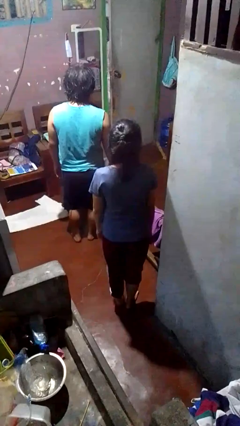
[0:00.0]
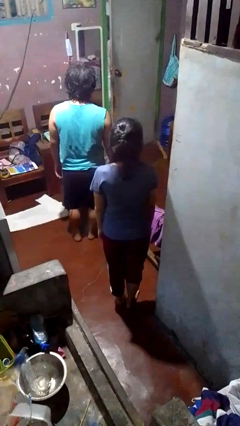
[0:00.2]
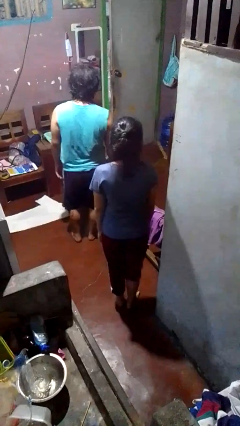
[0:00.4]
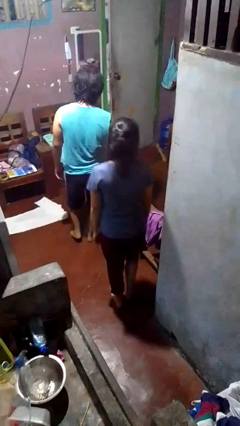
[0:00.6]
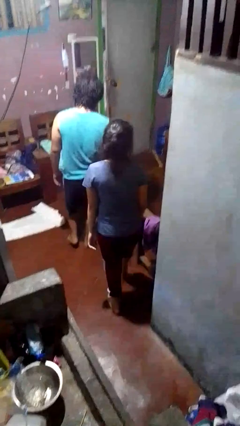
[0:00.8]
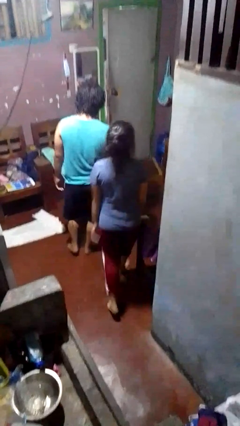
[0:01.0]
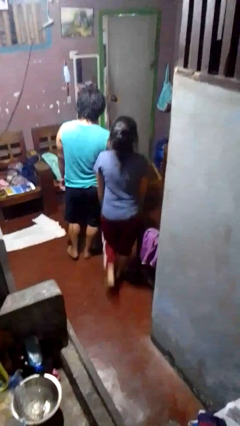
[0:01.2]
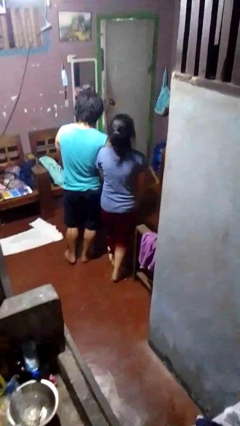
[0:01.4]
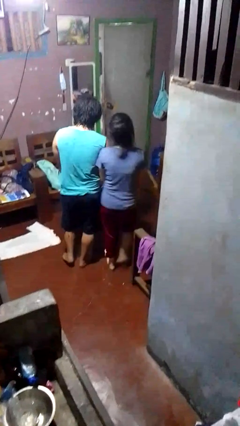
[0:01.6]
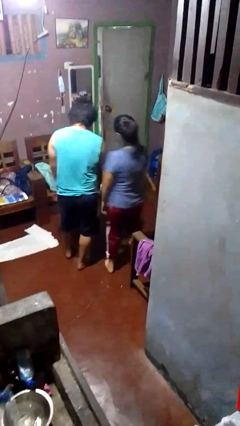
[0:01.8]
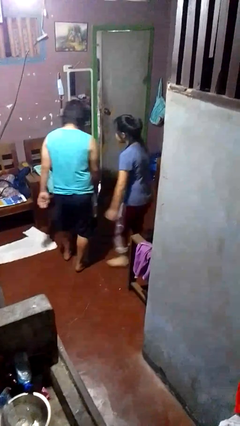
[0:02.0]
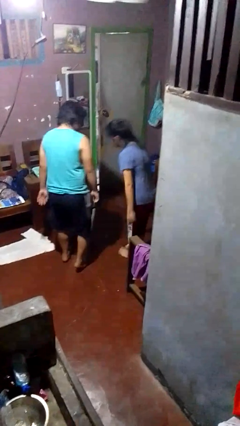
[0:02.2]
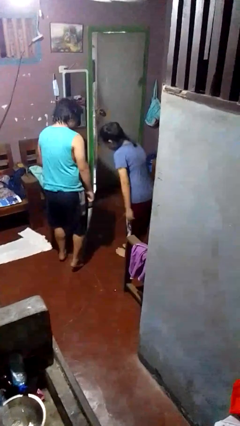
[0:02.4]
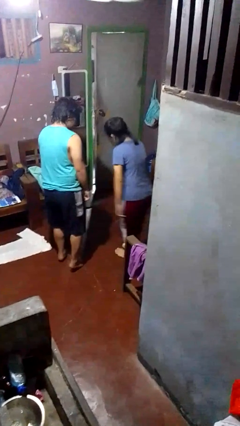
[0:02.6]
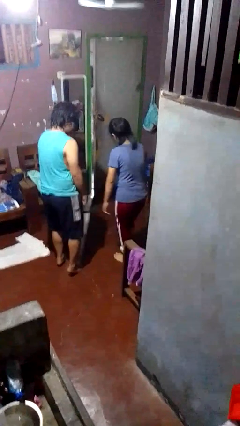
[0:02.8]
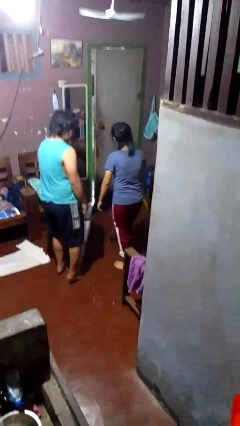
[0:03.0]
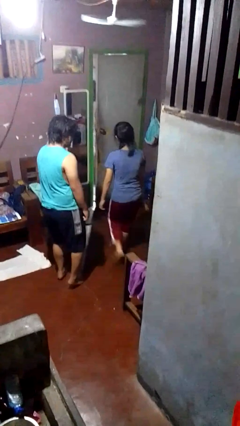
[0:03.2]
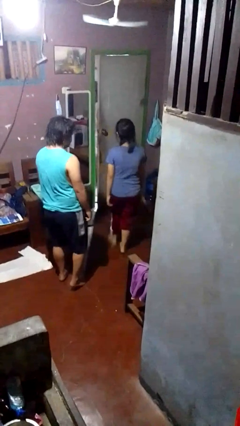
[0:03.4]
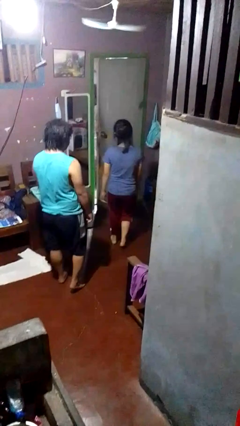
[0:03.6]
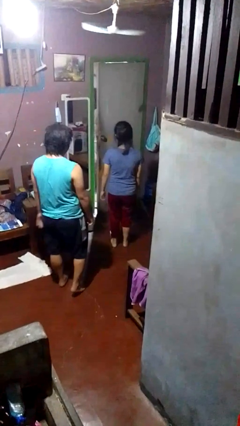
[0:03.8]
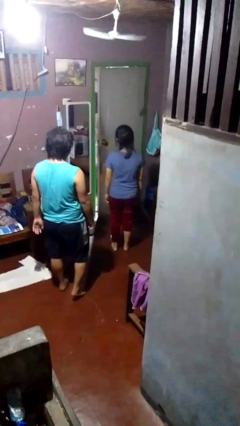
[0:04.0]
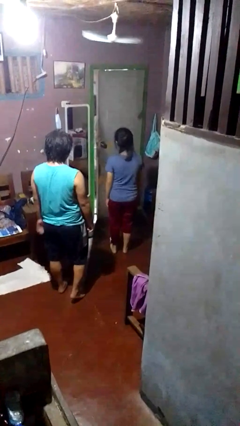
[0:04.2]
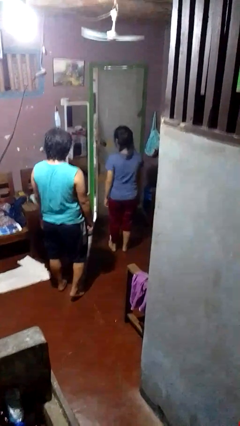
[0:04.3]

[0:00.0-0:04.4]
person bumps into person

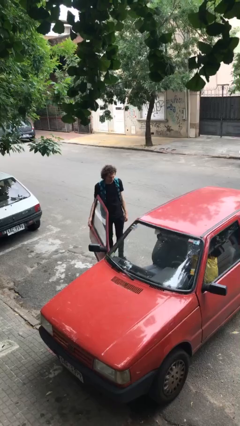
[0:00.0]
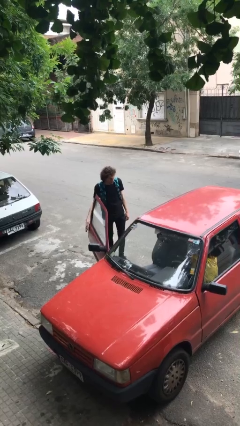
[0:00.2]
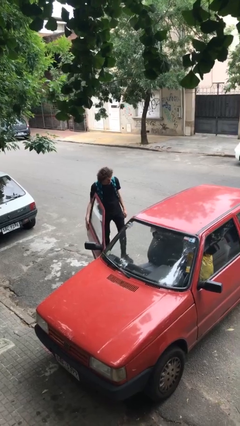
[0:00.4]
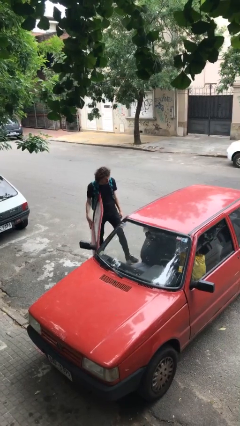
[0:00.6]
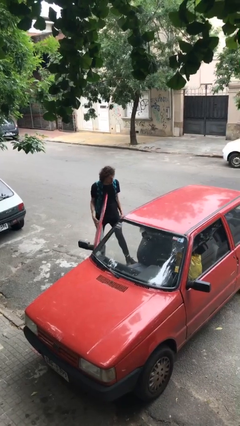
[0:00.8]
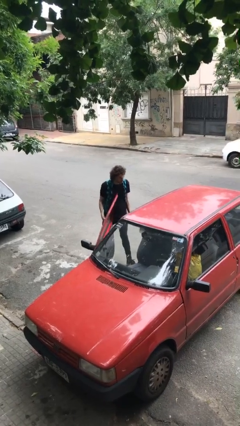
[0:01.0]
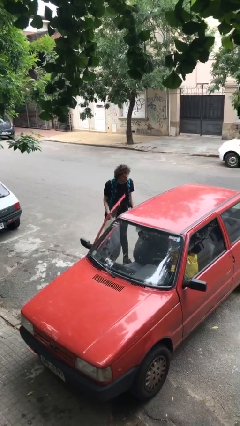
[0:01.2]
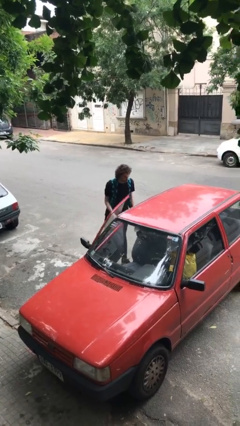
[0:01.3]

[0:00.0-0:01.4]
person closes car trunk

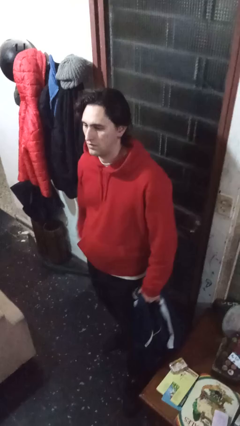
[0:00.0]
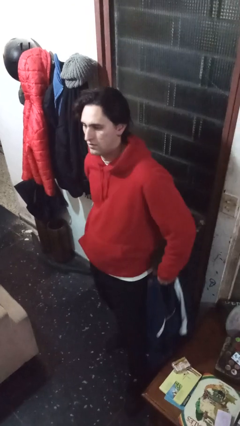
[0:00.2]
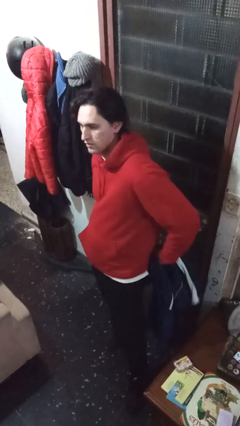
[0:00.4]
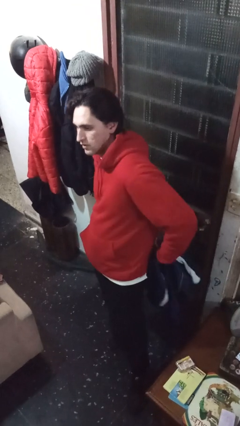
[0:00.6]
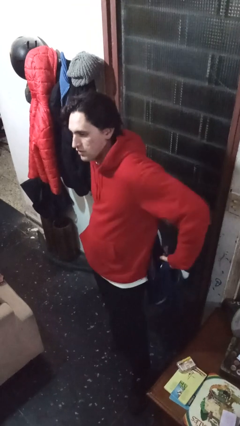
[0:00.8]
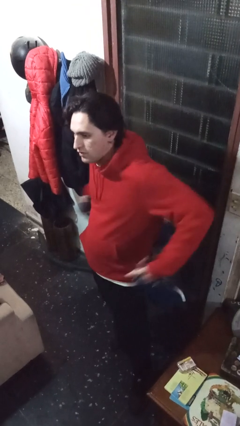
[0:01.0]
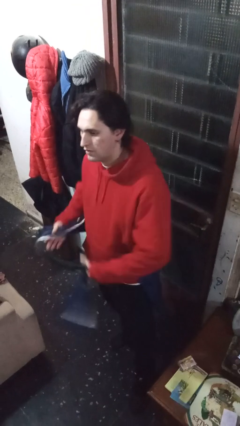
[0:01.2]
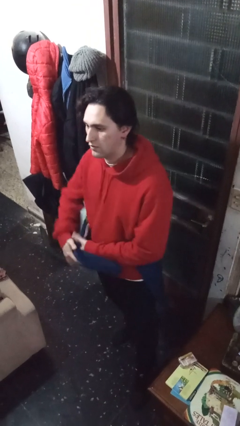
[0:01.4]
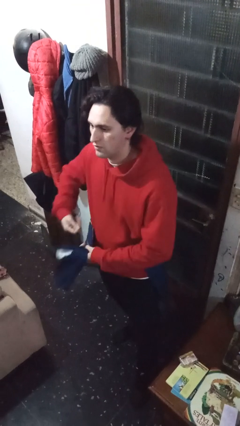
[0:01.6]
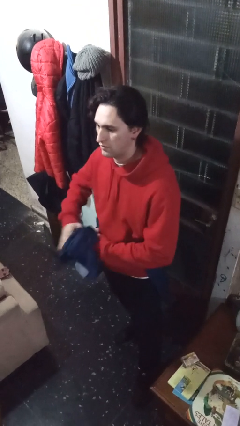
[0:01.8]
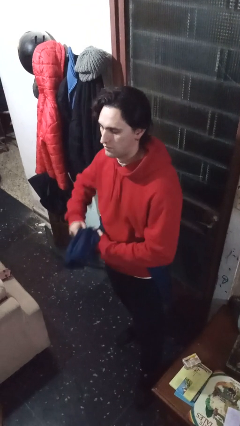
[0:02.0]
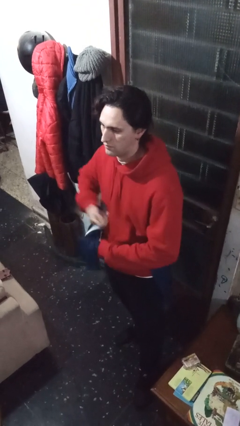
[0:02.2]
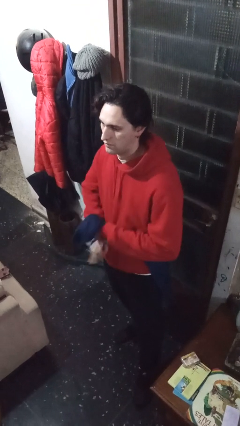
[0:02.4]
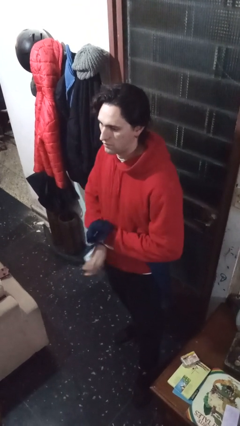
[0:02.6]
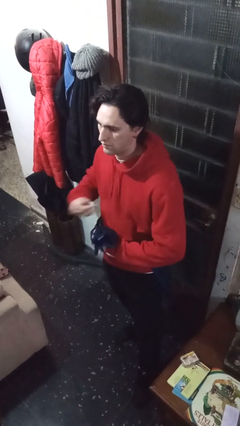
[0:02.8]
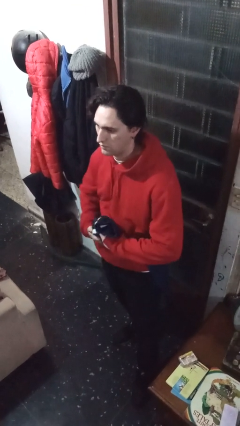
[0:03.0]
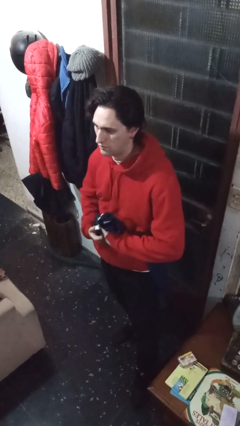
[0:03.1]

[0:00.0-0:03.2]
person ties jacket around waist

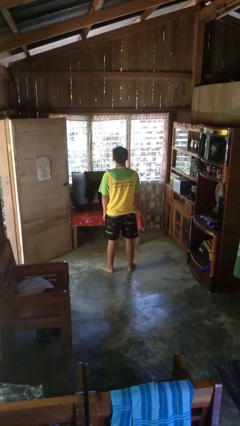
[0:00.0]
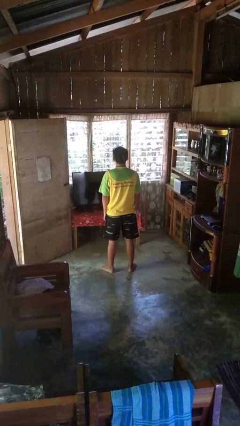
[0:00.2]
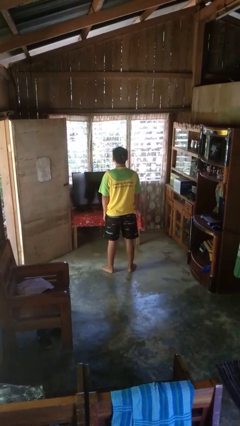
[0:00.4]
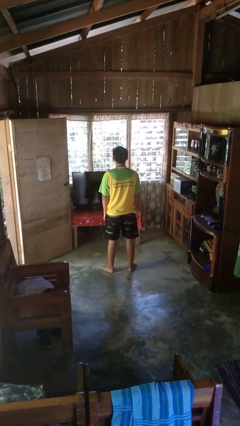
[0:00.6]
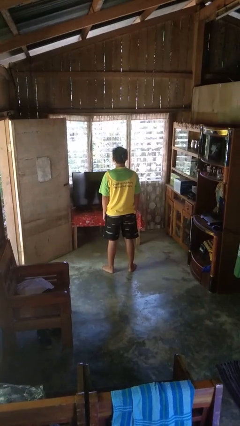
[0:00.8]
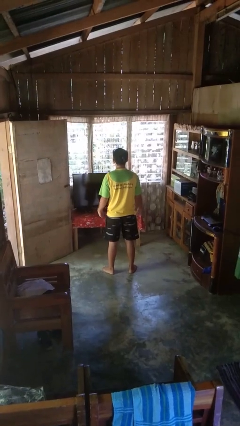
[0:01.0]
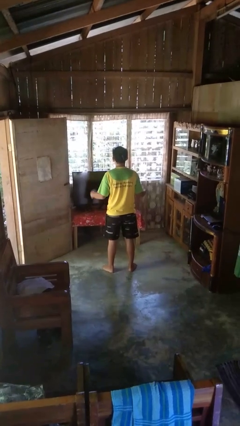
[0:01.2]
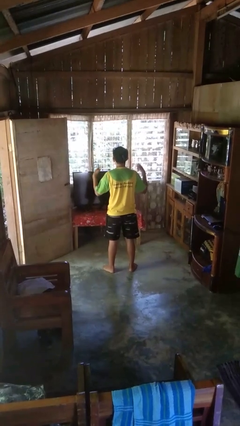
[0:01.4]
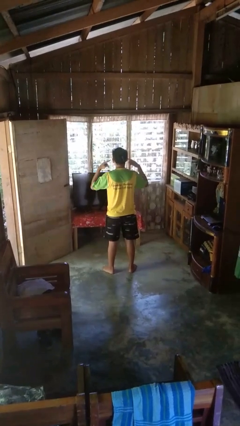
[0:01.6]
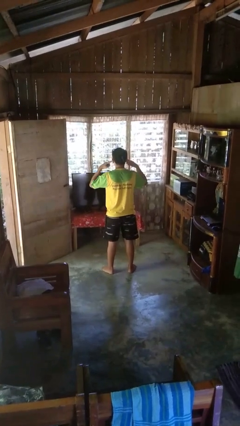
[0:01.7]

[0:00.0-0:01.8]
person puts fingers in ear

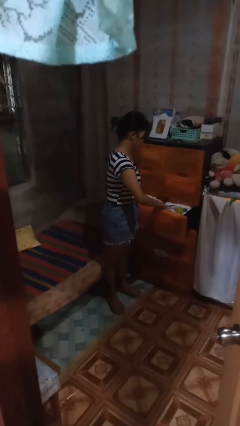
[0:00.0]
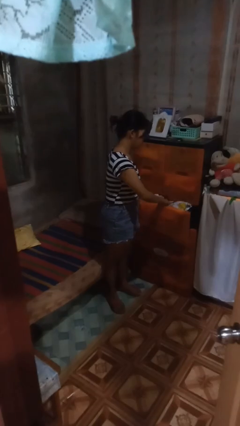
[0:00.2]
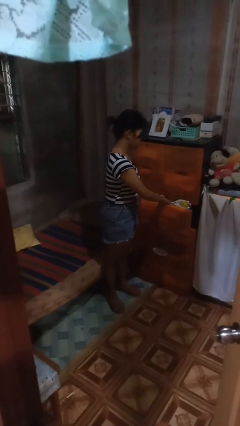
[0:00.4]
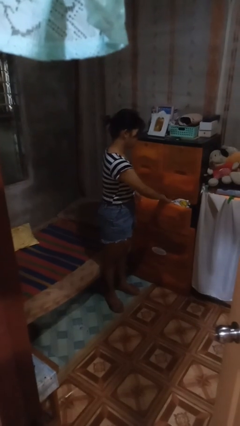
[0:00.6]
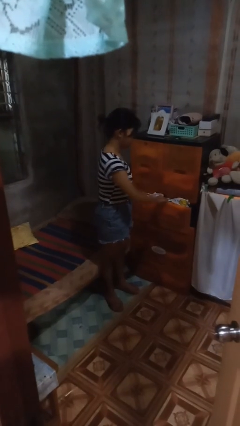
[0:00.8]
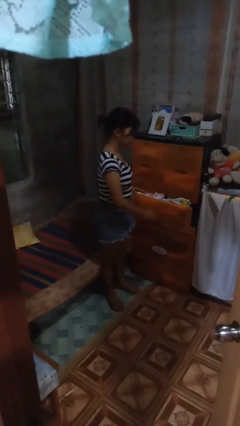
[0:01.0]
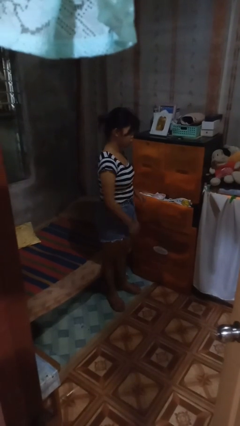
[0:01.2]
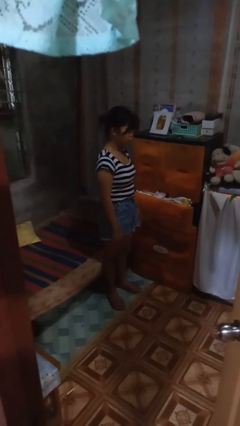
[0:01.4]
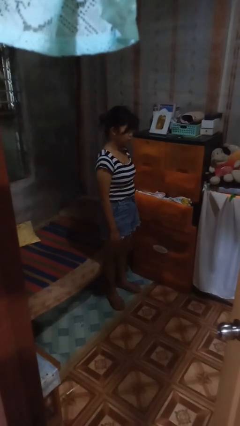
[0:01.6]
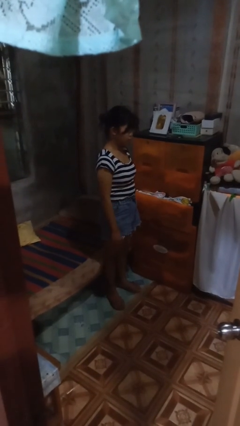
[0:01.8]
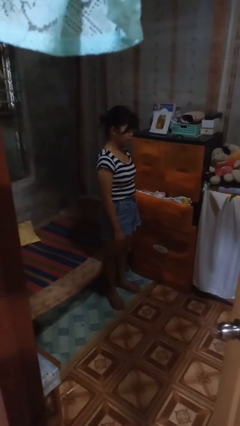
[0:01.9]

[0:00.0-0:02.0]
person closes dresser drawer

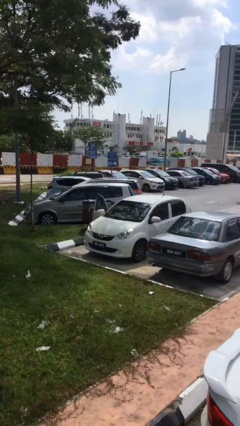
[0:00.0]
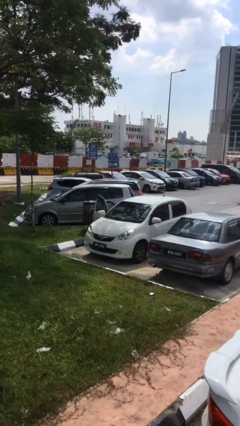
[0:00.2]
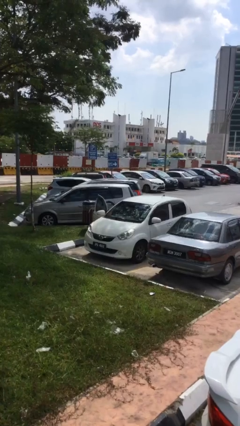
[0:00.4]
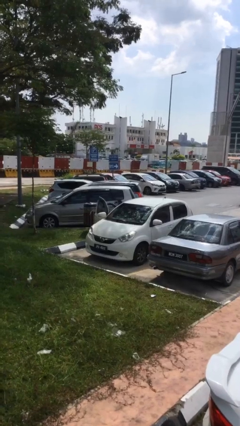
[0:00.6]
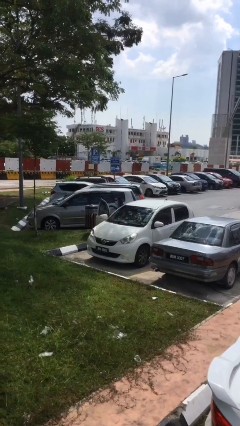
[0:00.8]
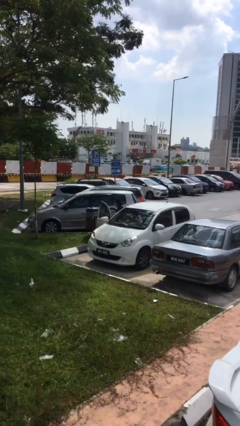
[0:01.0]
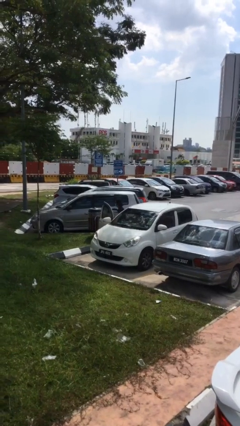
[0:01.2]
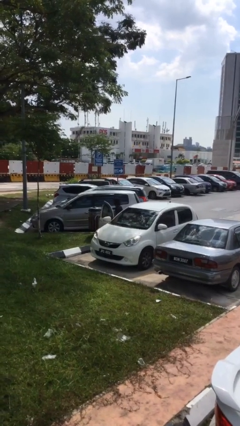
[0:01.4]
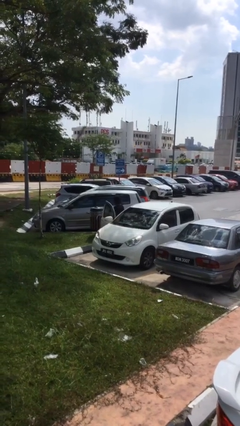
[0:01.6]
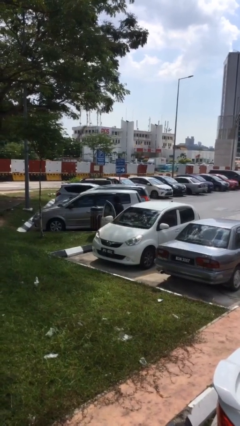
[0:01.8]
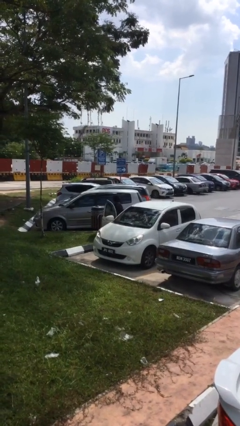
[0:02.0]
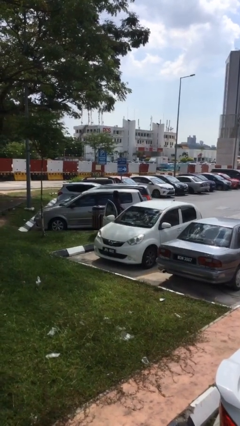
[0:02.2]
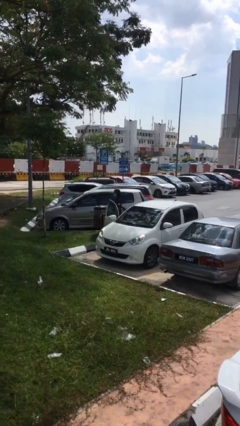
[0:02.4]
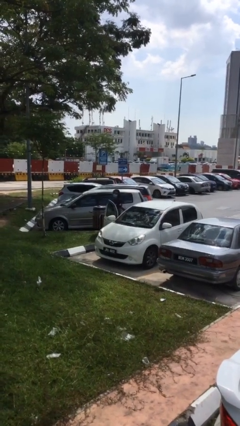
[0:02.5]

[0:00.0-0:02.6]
person exits car

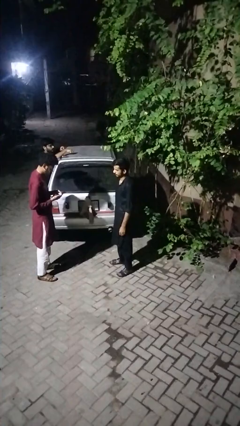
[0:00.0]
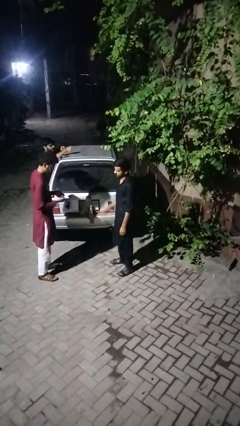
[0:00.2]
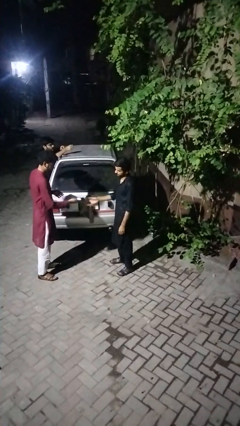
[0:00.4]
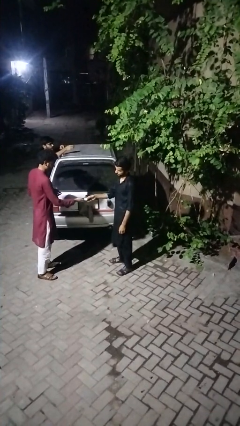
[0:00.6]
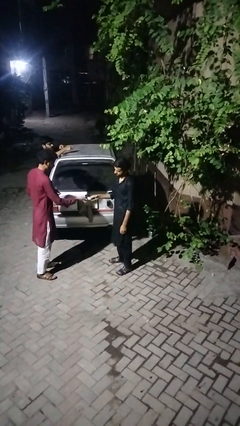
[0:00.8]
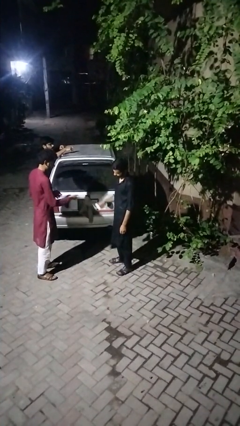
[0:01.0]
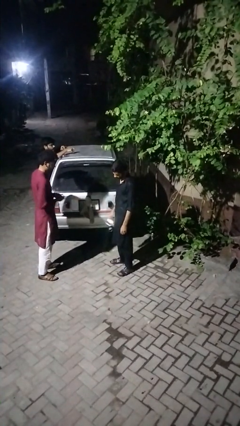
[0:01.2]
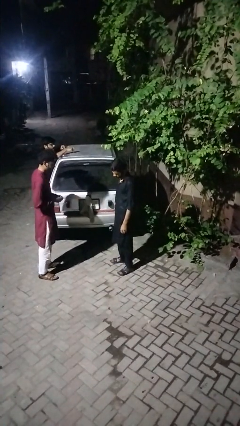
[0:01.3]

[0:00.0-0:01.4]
person transfers object to person

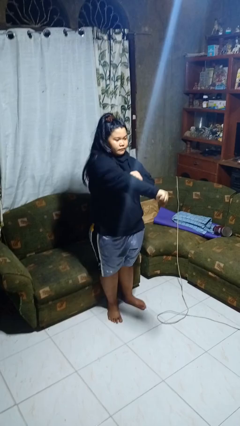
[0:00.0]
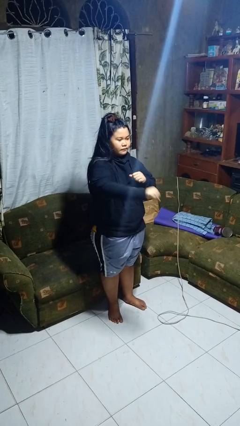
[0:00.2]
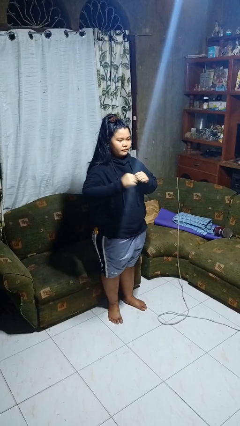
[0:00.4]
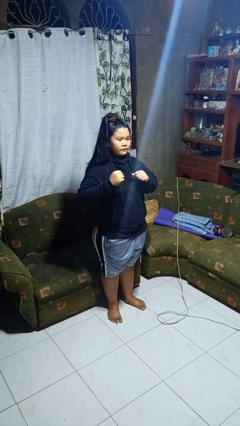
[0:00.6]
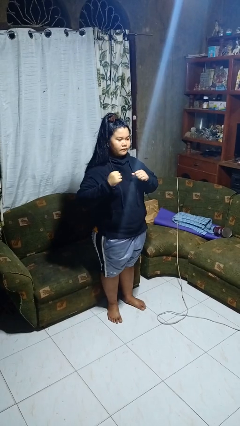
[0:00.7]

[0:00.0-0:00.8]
person punches
